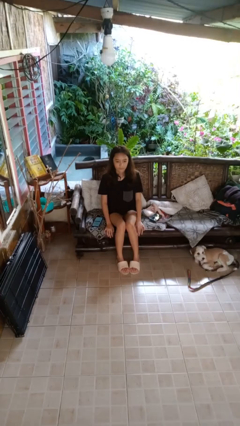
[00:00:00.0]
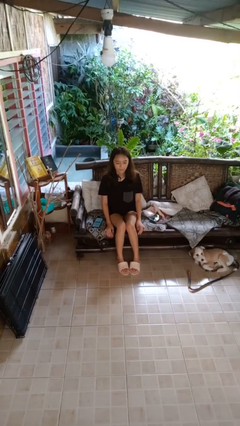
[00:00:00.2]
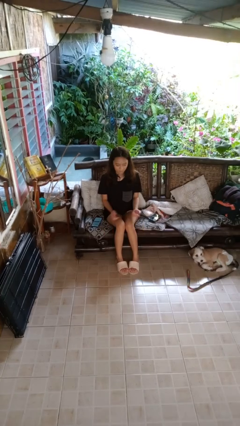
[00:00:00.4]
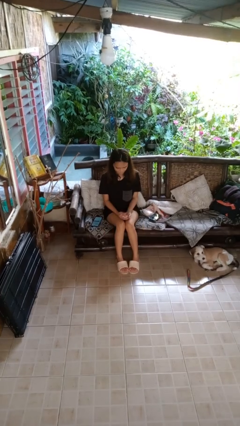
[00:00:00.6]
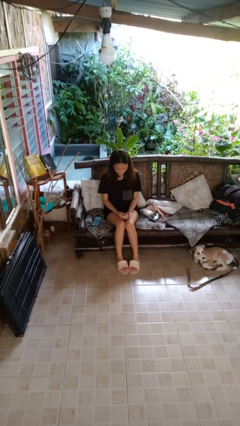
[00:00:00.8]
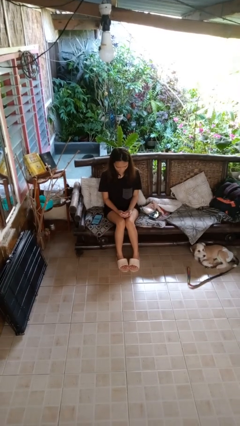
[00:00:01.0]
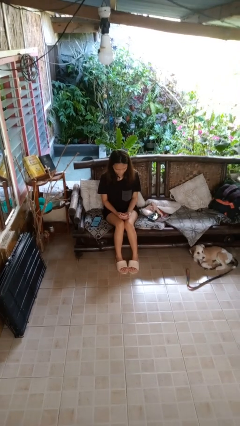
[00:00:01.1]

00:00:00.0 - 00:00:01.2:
person looks at hands in lap

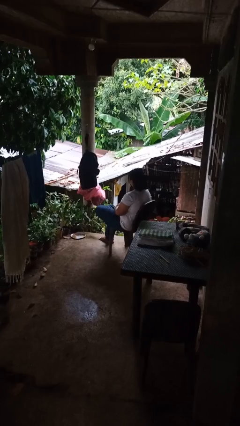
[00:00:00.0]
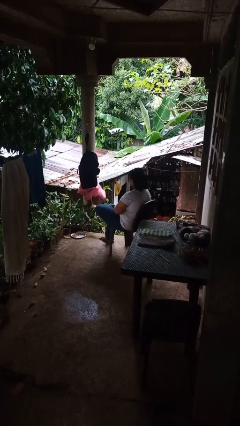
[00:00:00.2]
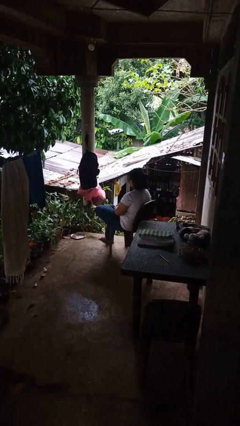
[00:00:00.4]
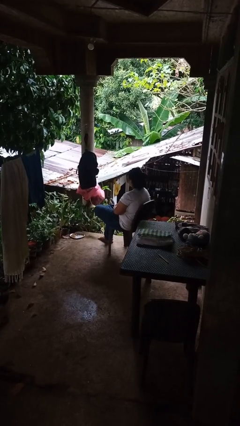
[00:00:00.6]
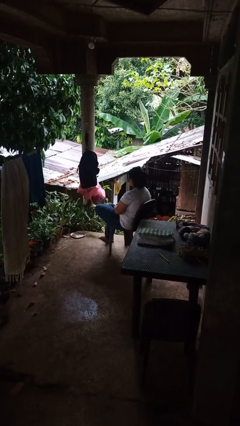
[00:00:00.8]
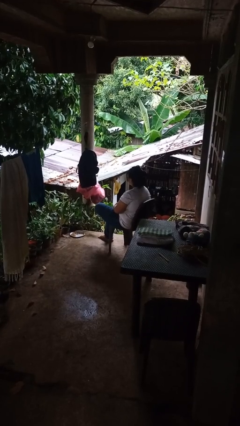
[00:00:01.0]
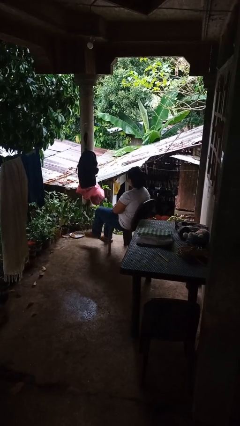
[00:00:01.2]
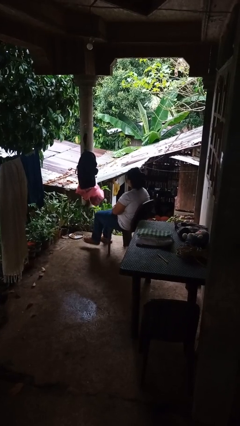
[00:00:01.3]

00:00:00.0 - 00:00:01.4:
person crosses legs

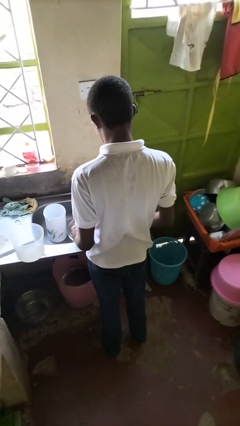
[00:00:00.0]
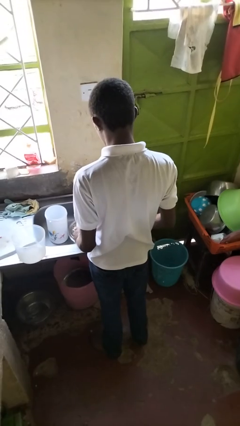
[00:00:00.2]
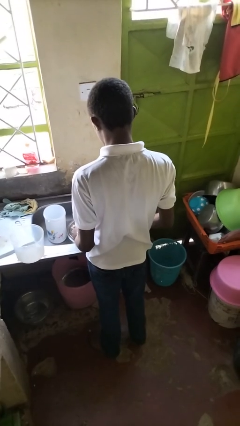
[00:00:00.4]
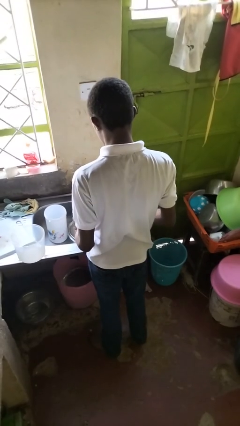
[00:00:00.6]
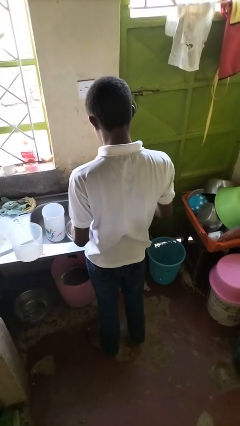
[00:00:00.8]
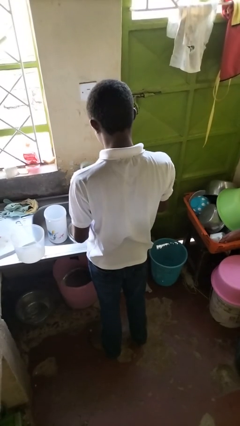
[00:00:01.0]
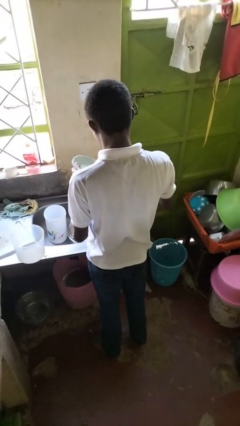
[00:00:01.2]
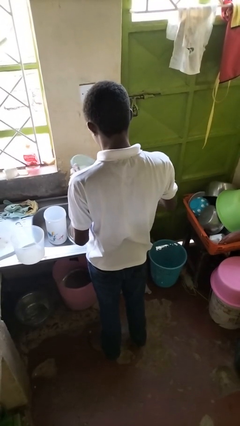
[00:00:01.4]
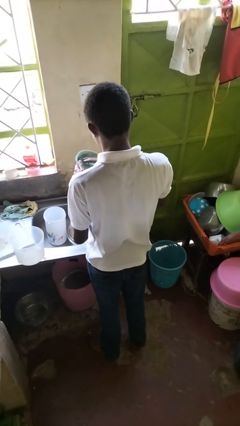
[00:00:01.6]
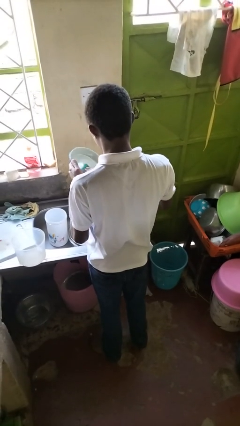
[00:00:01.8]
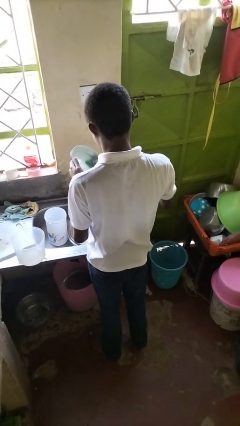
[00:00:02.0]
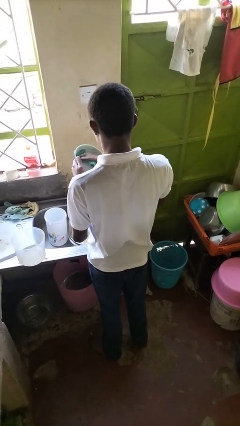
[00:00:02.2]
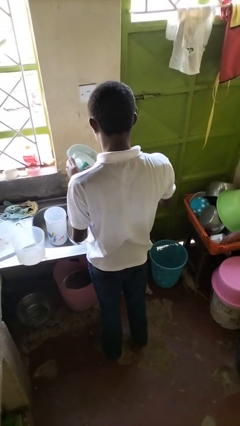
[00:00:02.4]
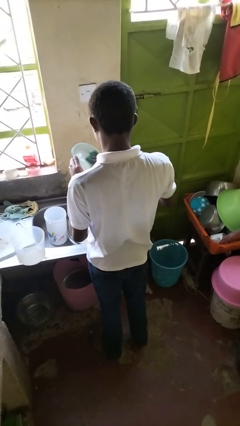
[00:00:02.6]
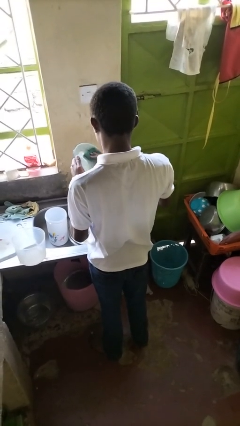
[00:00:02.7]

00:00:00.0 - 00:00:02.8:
person washes dish

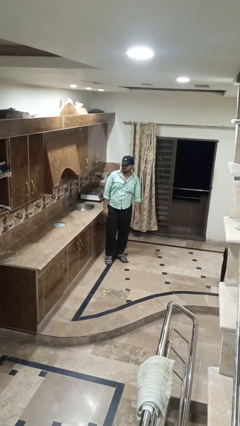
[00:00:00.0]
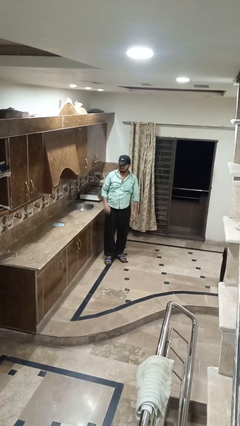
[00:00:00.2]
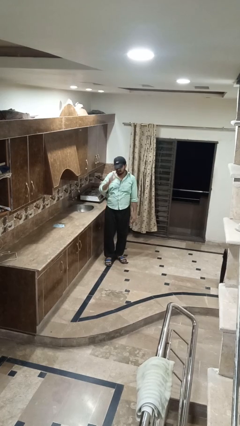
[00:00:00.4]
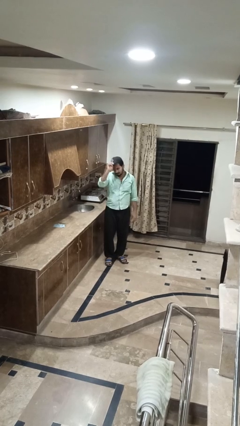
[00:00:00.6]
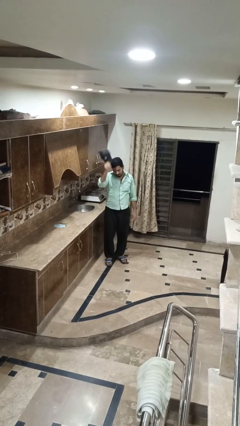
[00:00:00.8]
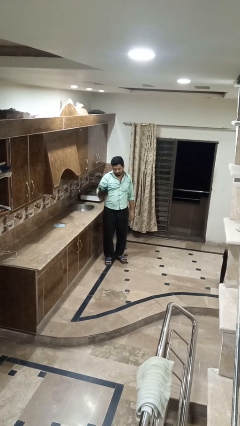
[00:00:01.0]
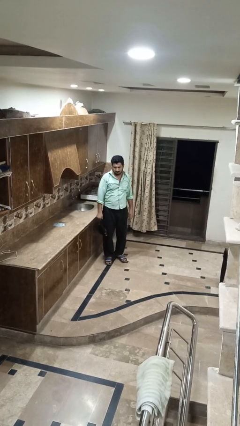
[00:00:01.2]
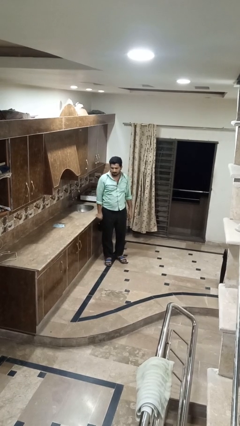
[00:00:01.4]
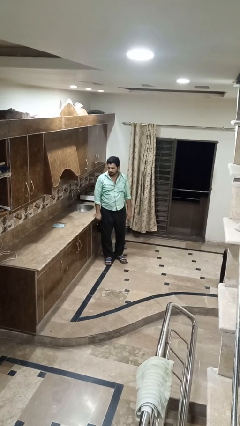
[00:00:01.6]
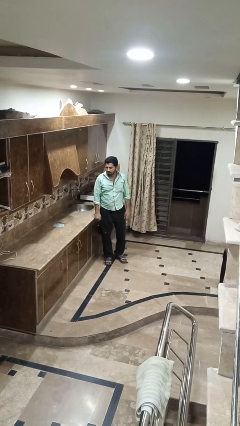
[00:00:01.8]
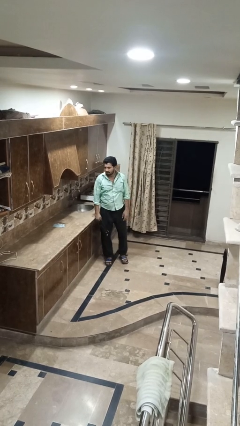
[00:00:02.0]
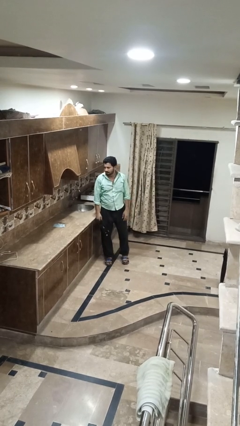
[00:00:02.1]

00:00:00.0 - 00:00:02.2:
person takes off hat

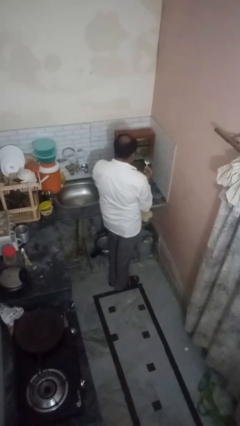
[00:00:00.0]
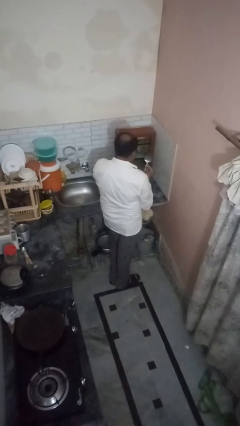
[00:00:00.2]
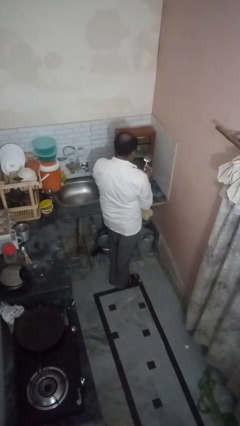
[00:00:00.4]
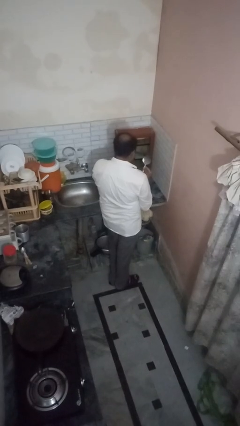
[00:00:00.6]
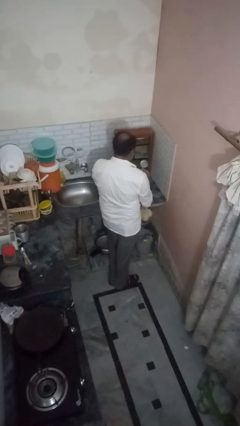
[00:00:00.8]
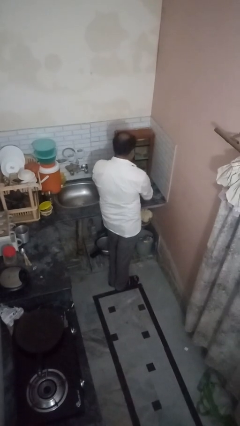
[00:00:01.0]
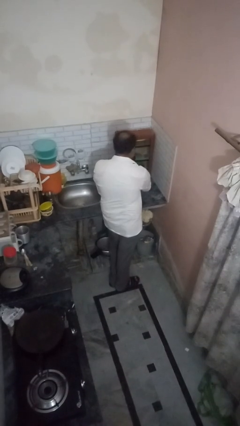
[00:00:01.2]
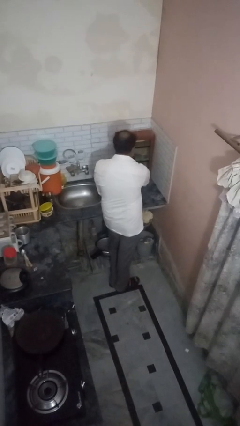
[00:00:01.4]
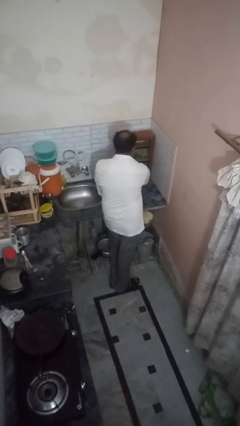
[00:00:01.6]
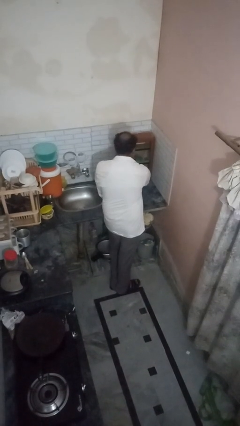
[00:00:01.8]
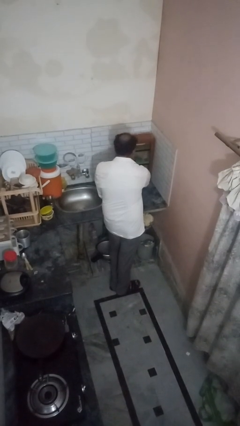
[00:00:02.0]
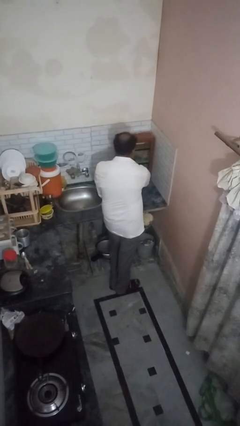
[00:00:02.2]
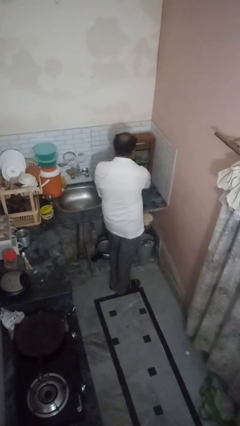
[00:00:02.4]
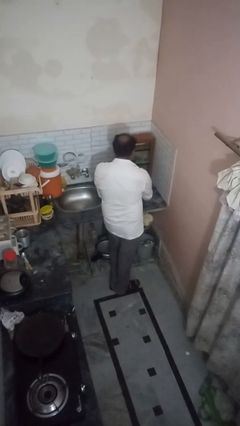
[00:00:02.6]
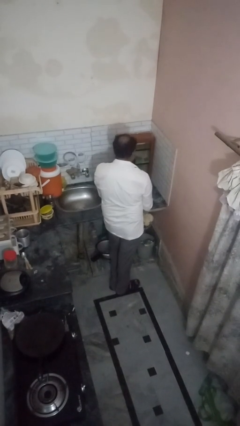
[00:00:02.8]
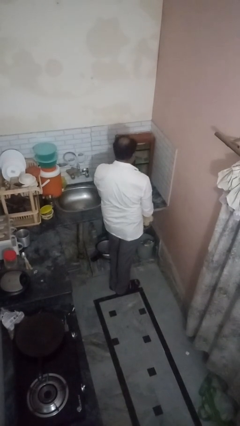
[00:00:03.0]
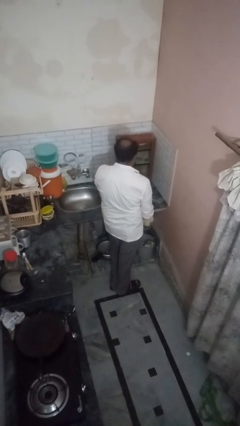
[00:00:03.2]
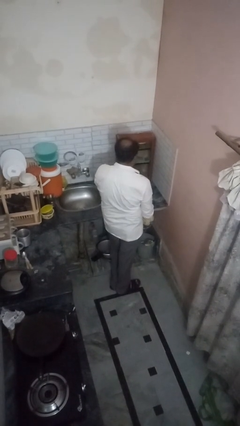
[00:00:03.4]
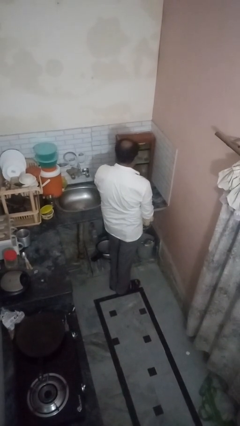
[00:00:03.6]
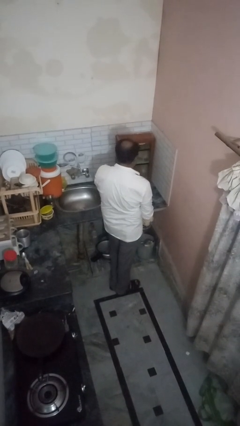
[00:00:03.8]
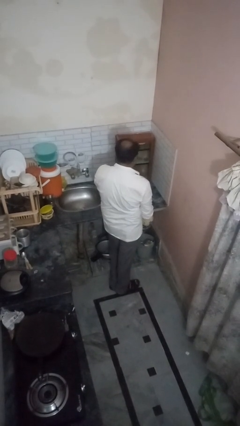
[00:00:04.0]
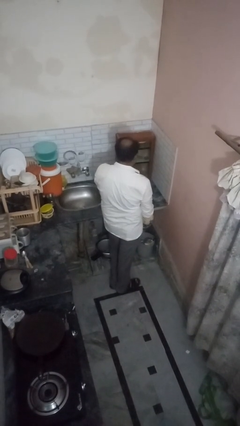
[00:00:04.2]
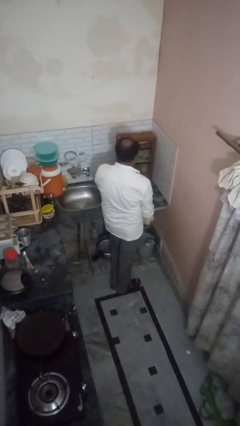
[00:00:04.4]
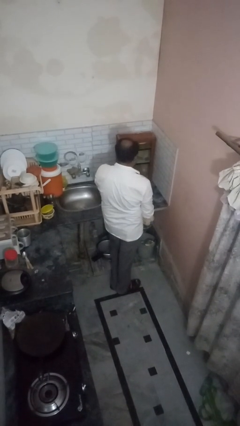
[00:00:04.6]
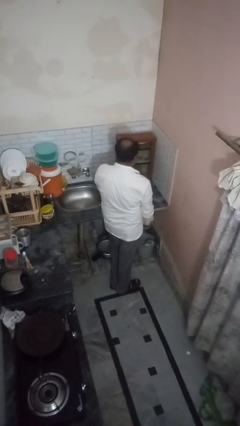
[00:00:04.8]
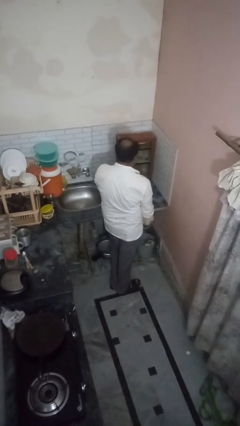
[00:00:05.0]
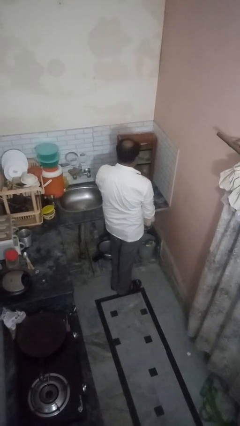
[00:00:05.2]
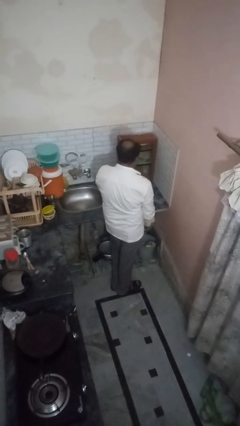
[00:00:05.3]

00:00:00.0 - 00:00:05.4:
person puts object into kitchen drawer

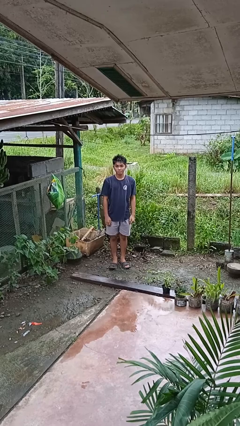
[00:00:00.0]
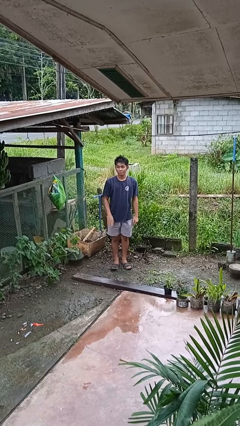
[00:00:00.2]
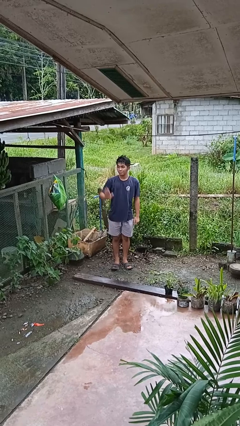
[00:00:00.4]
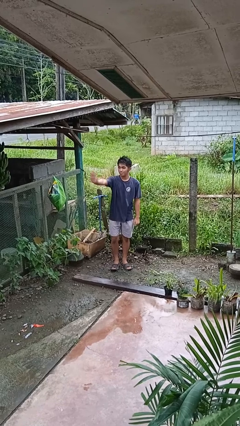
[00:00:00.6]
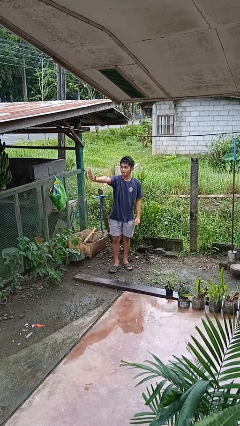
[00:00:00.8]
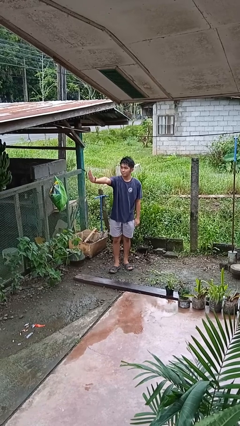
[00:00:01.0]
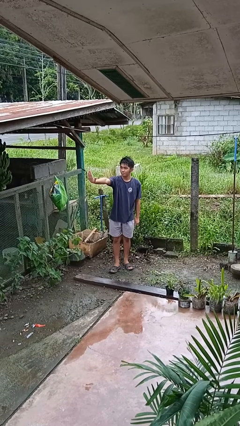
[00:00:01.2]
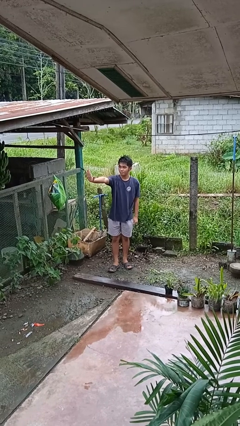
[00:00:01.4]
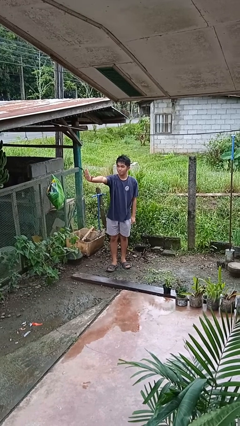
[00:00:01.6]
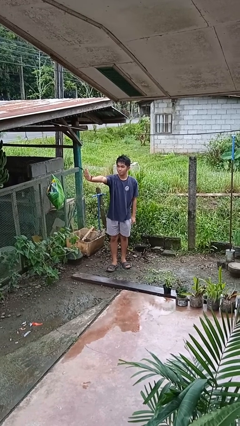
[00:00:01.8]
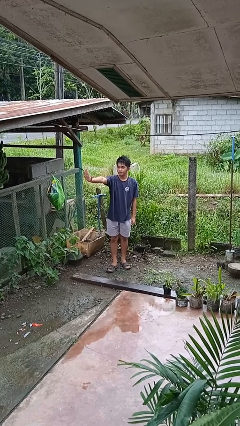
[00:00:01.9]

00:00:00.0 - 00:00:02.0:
person gestures stop

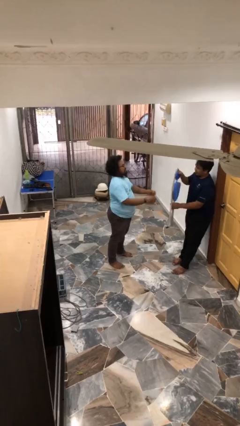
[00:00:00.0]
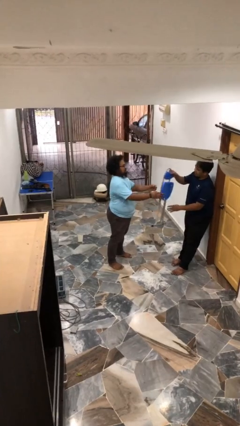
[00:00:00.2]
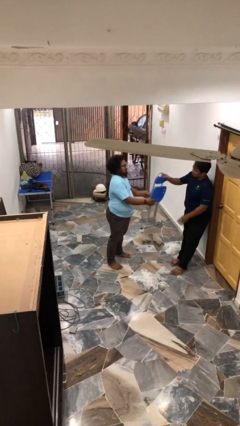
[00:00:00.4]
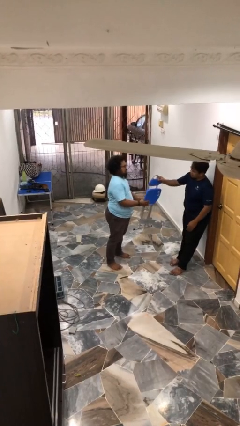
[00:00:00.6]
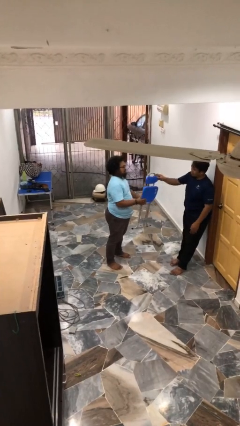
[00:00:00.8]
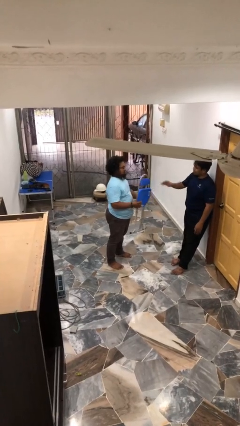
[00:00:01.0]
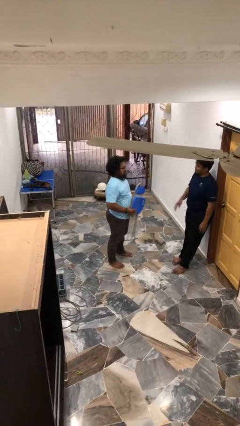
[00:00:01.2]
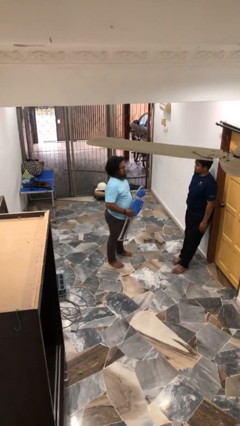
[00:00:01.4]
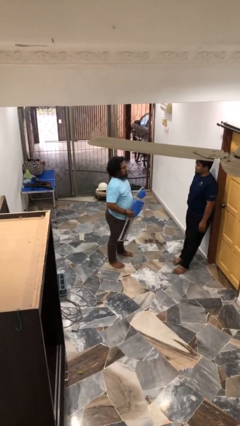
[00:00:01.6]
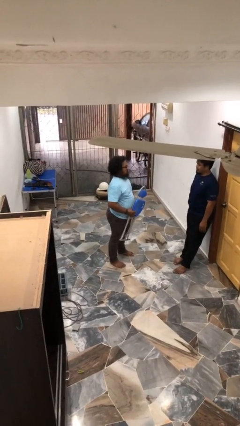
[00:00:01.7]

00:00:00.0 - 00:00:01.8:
person transfers object to person

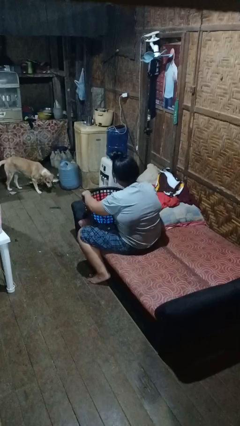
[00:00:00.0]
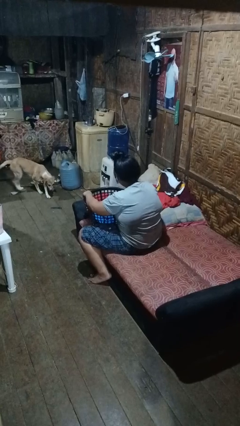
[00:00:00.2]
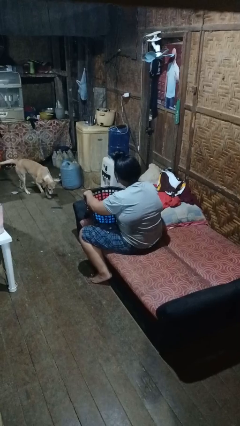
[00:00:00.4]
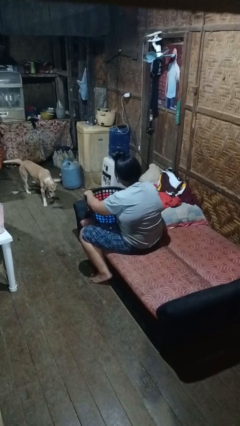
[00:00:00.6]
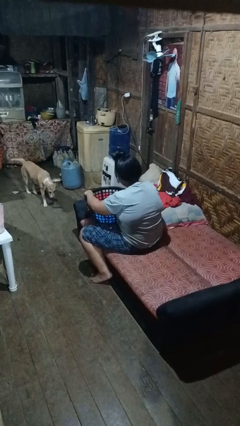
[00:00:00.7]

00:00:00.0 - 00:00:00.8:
person puts object into basket
